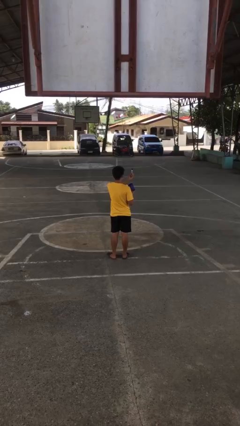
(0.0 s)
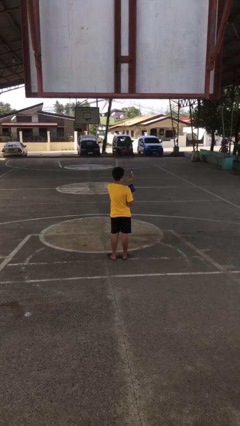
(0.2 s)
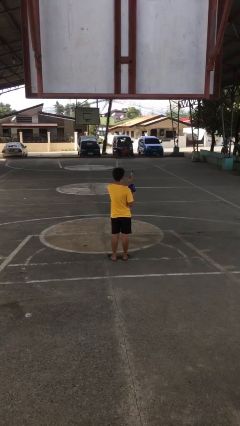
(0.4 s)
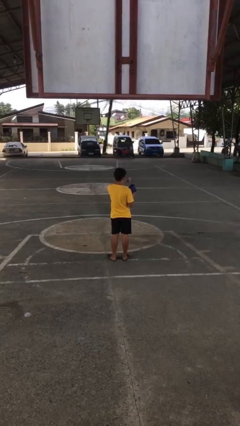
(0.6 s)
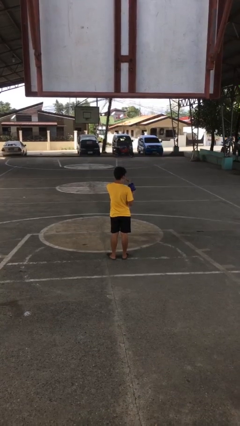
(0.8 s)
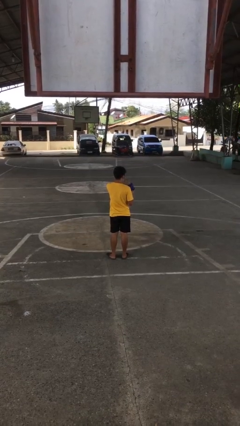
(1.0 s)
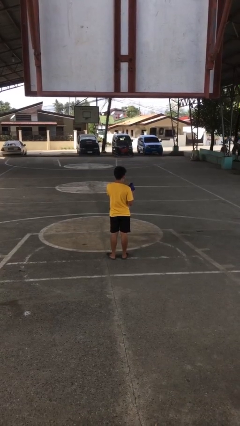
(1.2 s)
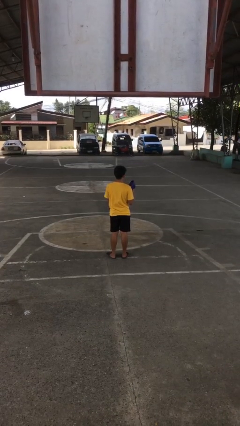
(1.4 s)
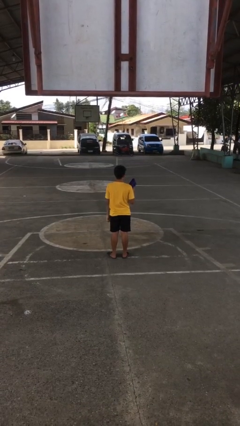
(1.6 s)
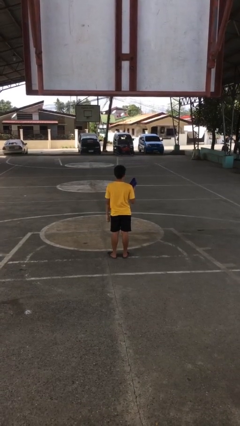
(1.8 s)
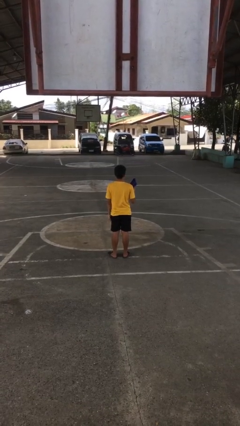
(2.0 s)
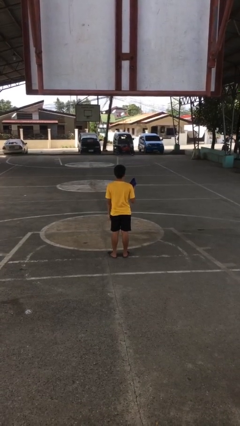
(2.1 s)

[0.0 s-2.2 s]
person puts object into purse

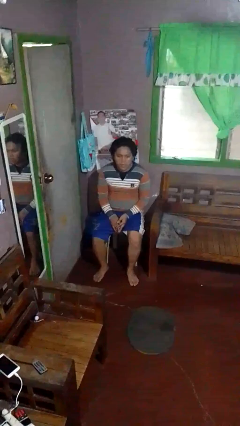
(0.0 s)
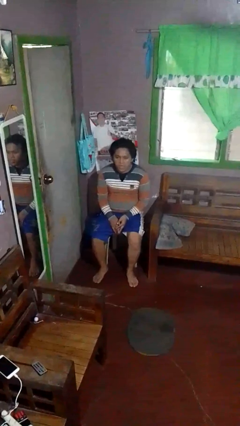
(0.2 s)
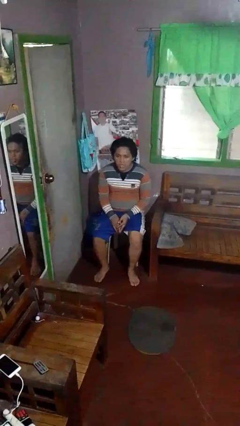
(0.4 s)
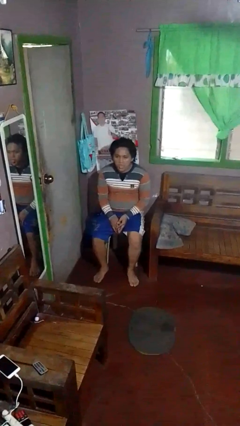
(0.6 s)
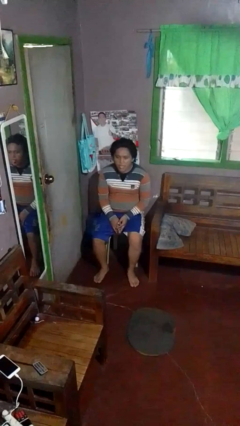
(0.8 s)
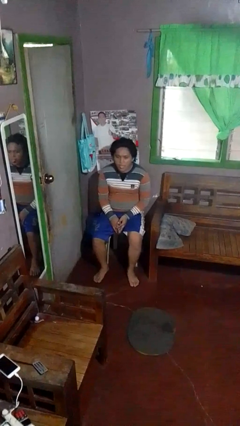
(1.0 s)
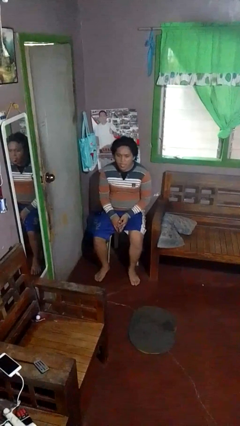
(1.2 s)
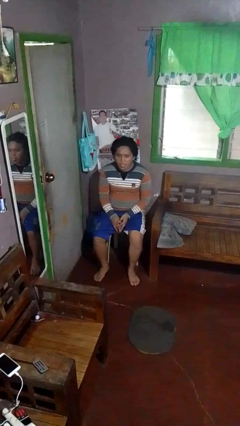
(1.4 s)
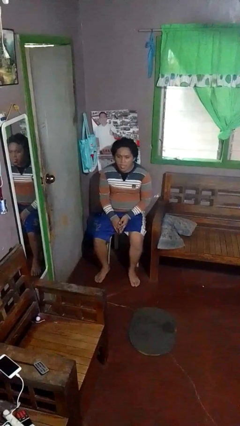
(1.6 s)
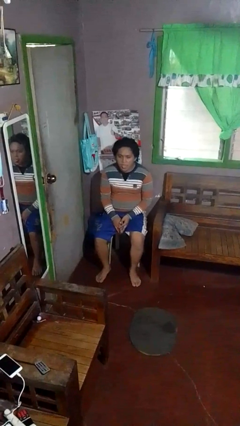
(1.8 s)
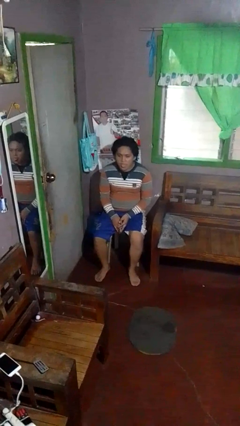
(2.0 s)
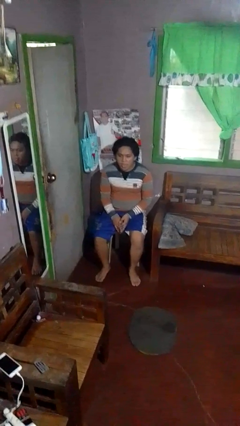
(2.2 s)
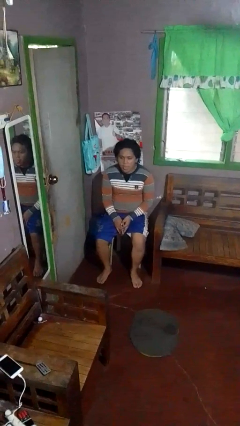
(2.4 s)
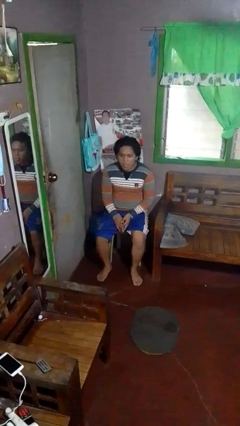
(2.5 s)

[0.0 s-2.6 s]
person sticks out tongue

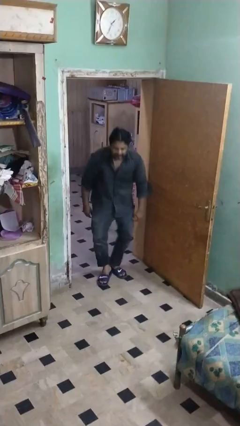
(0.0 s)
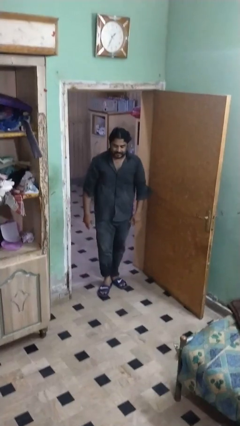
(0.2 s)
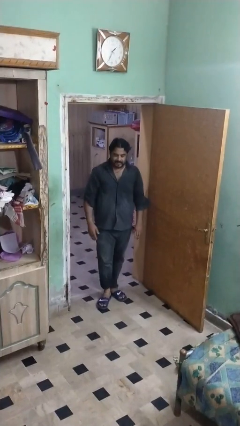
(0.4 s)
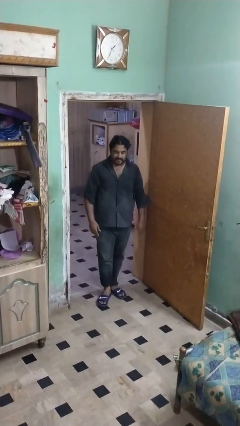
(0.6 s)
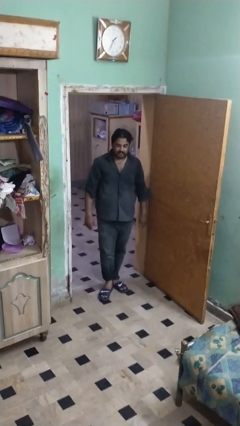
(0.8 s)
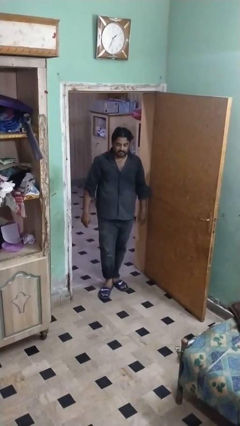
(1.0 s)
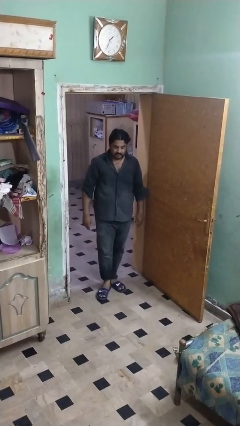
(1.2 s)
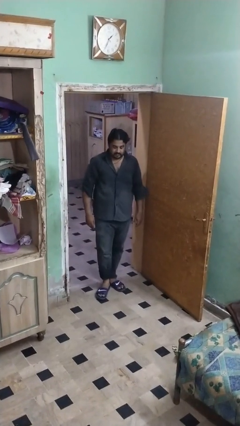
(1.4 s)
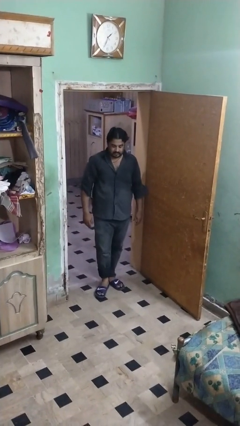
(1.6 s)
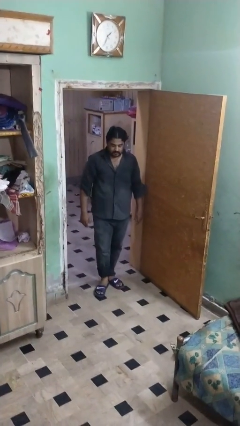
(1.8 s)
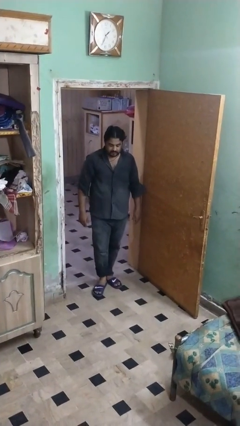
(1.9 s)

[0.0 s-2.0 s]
person stands up from floor

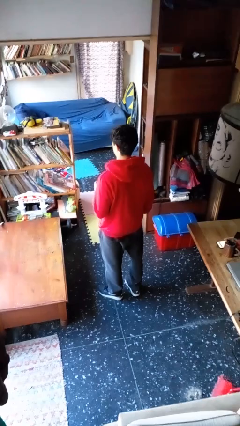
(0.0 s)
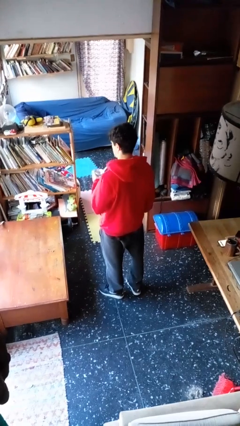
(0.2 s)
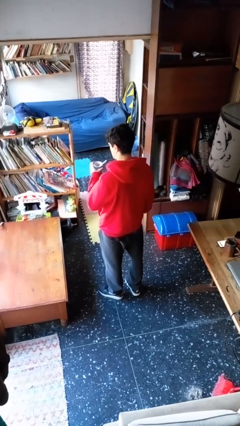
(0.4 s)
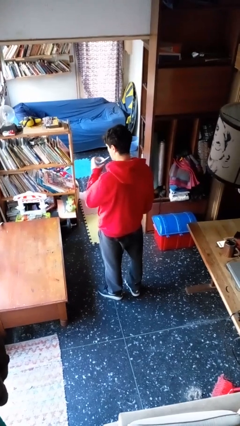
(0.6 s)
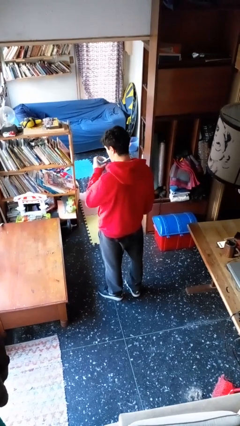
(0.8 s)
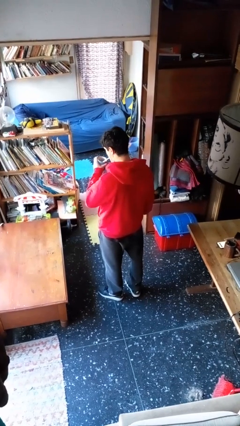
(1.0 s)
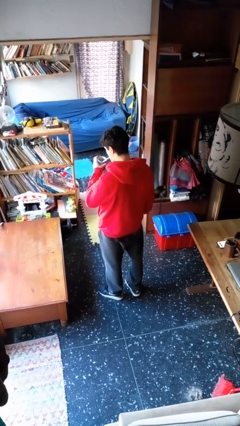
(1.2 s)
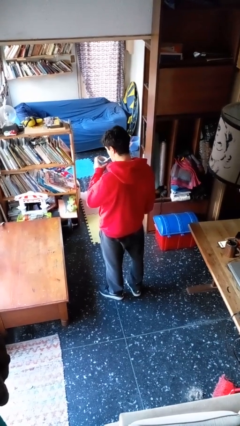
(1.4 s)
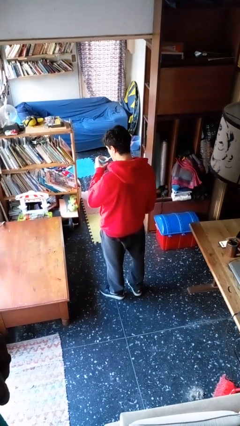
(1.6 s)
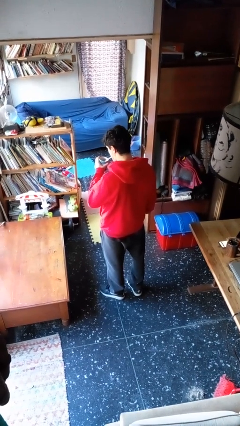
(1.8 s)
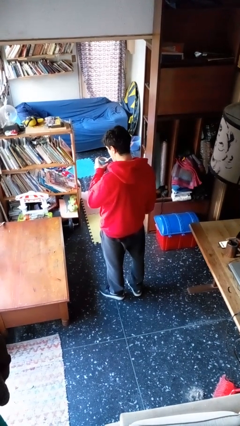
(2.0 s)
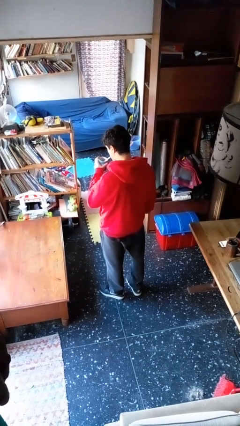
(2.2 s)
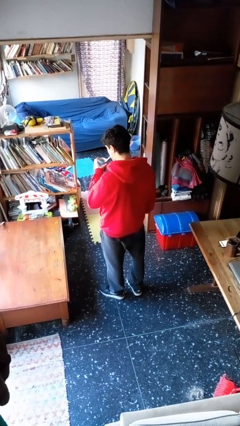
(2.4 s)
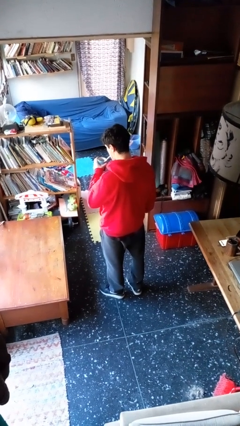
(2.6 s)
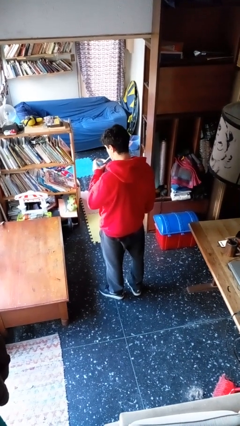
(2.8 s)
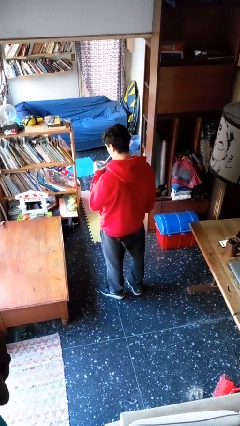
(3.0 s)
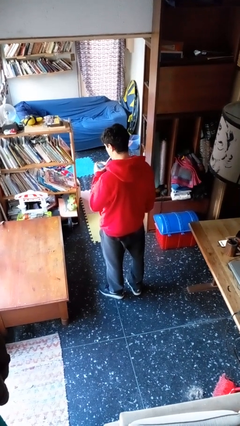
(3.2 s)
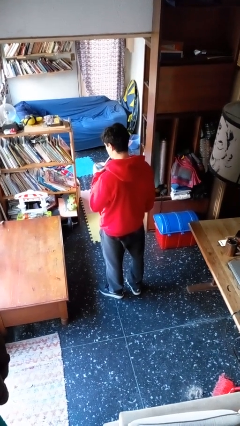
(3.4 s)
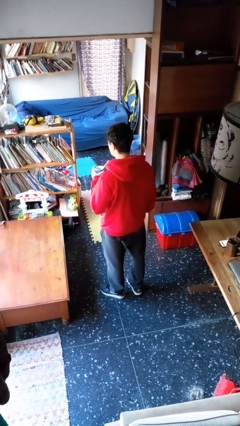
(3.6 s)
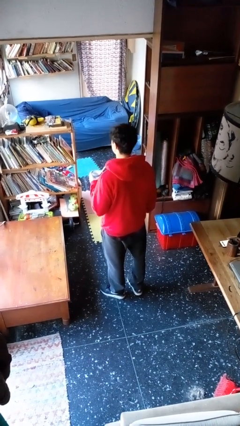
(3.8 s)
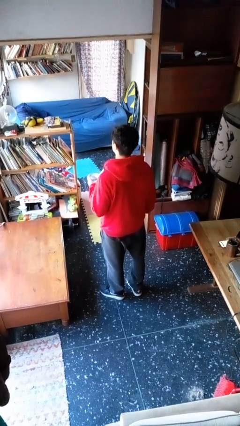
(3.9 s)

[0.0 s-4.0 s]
person drinks from straw

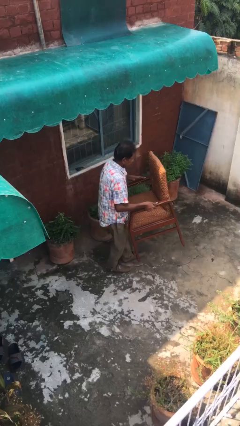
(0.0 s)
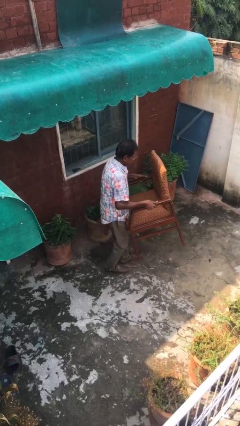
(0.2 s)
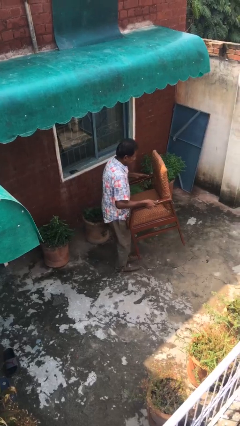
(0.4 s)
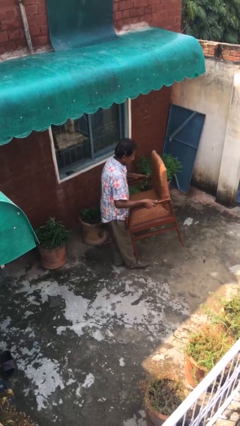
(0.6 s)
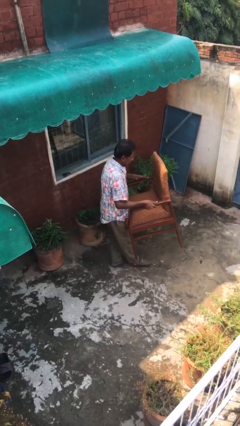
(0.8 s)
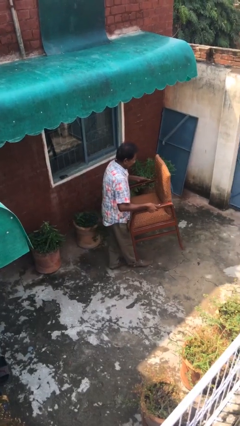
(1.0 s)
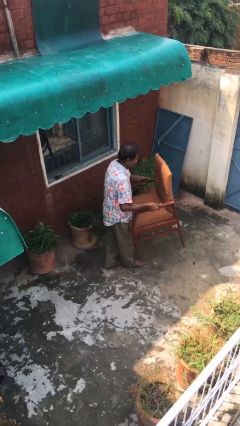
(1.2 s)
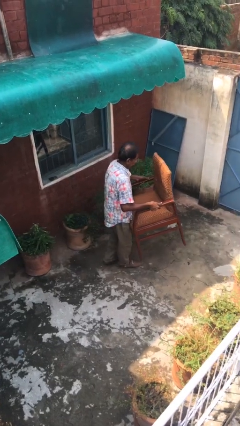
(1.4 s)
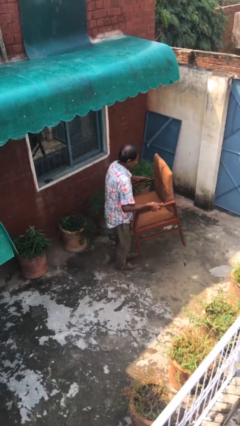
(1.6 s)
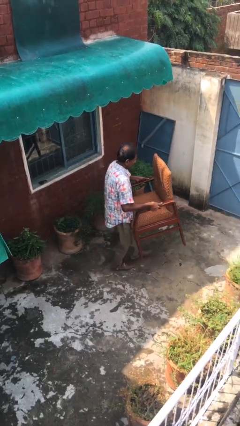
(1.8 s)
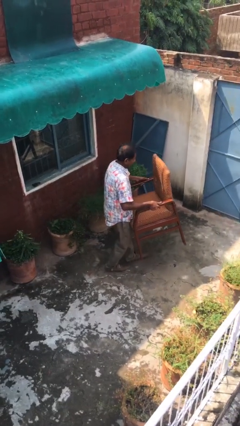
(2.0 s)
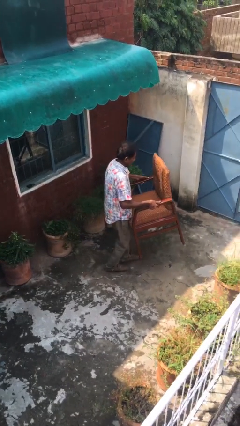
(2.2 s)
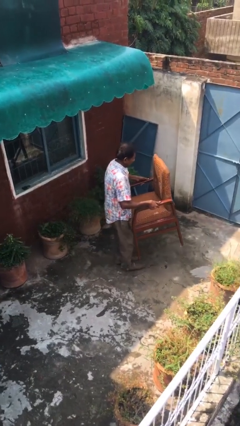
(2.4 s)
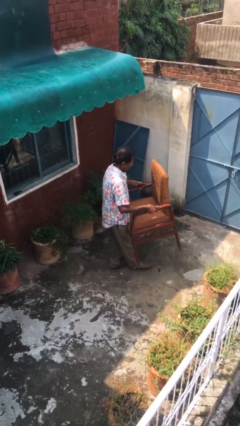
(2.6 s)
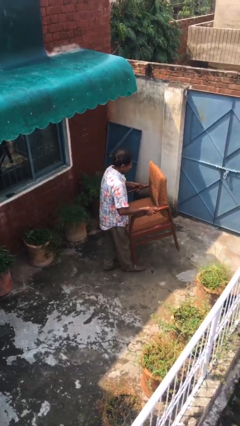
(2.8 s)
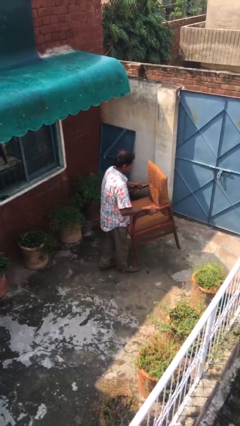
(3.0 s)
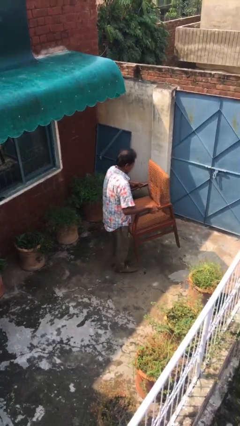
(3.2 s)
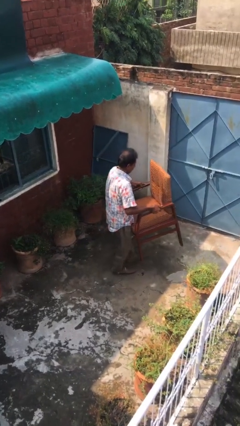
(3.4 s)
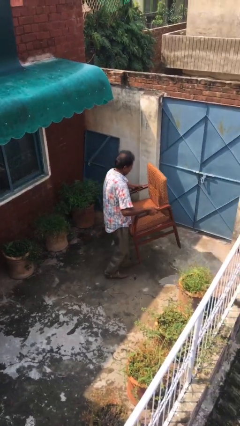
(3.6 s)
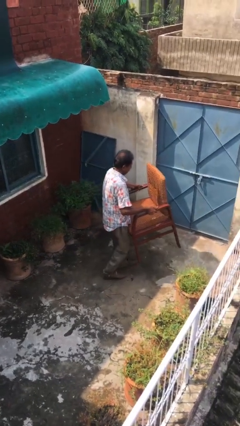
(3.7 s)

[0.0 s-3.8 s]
person carries heavy object

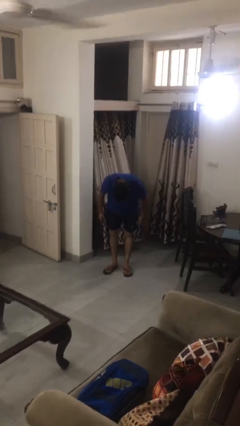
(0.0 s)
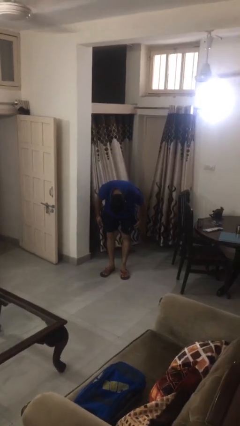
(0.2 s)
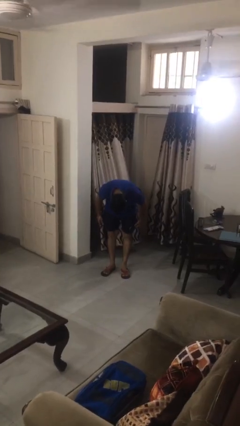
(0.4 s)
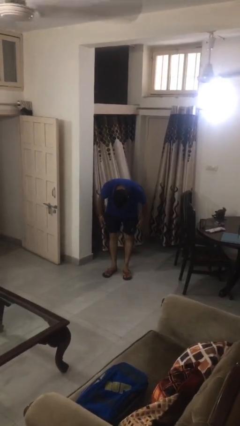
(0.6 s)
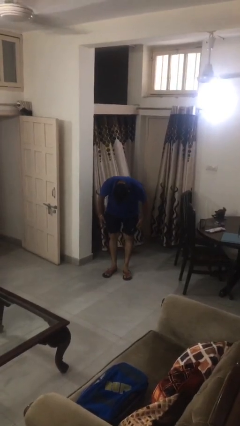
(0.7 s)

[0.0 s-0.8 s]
person bows

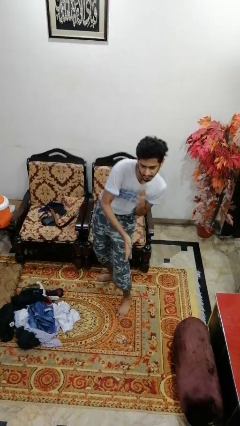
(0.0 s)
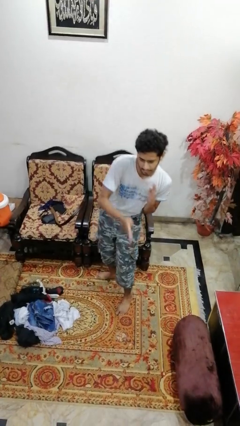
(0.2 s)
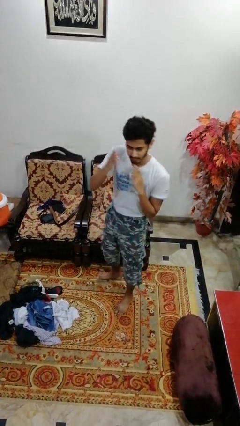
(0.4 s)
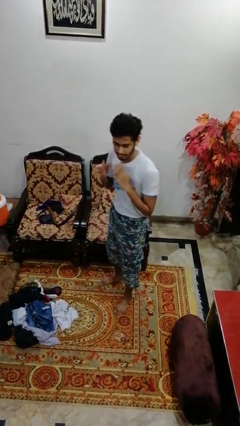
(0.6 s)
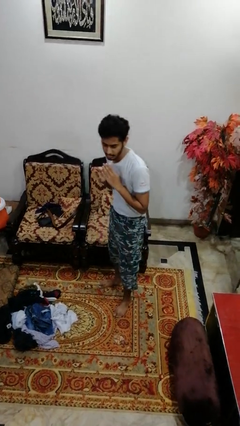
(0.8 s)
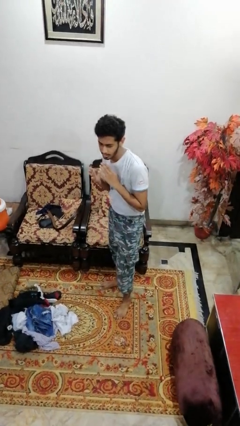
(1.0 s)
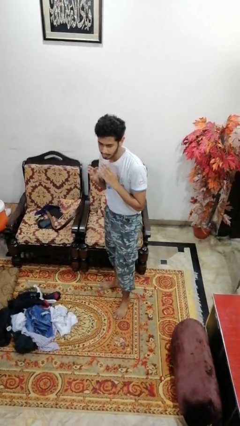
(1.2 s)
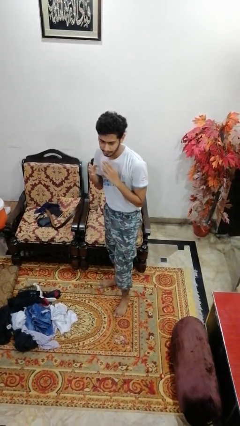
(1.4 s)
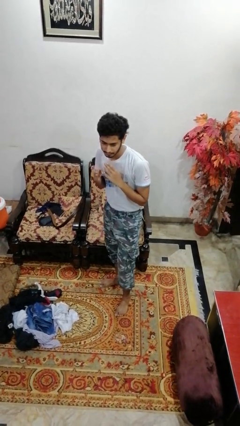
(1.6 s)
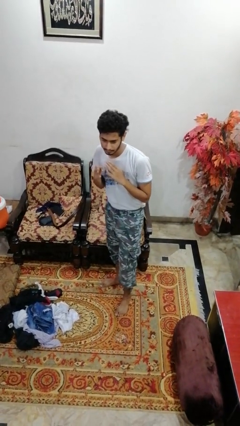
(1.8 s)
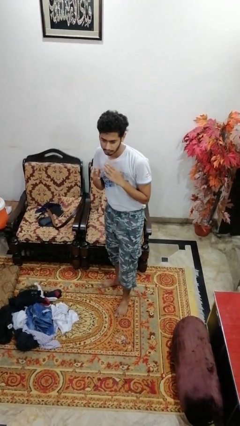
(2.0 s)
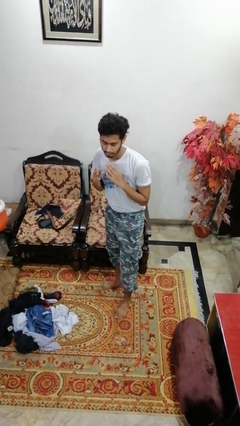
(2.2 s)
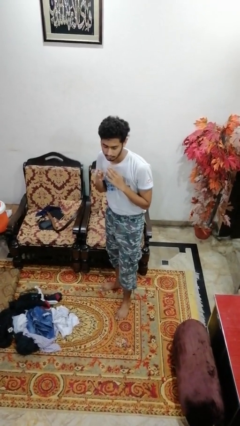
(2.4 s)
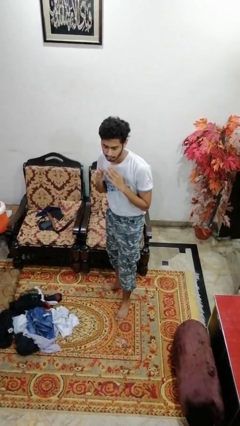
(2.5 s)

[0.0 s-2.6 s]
person karate chop
